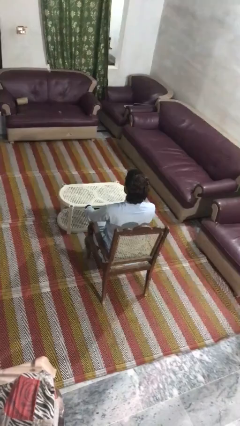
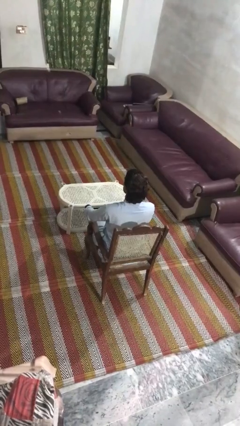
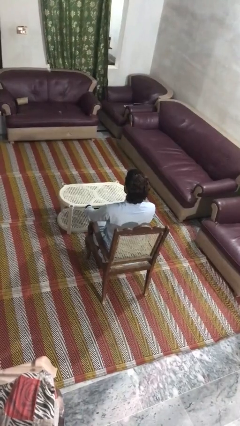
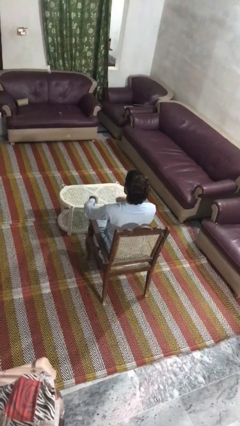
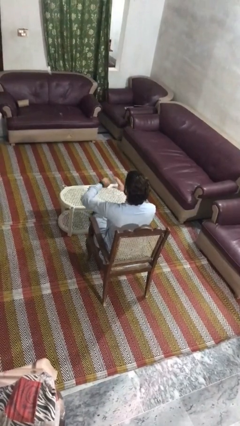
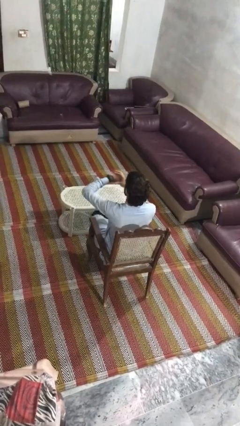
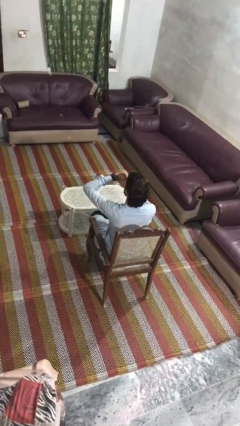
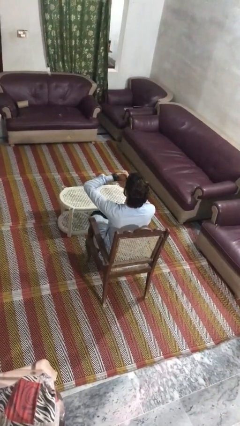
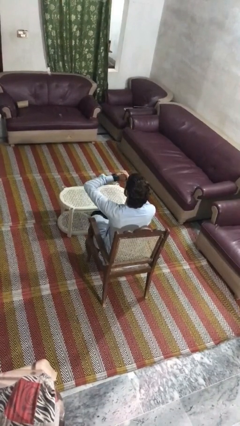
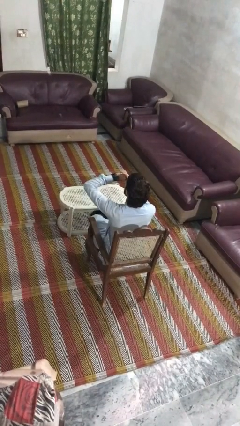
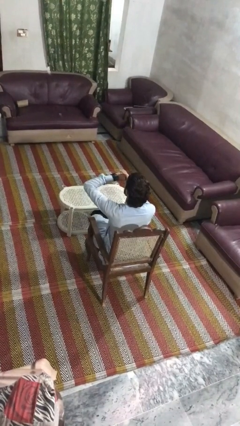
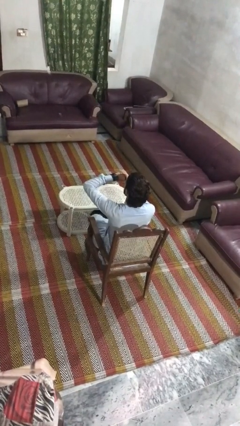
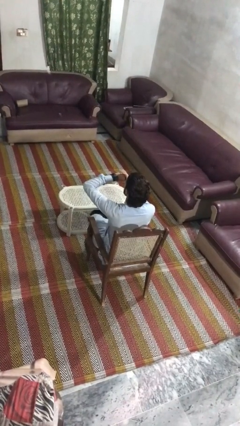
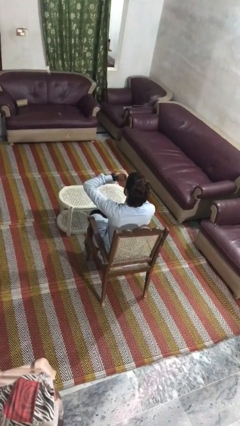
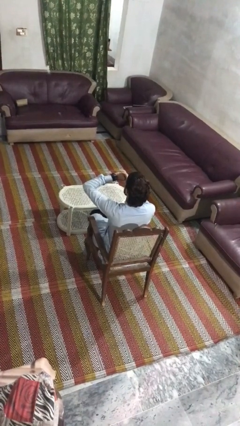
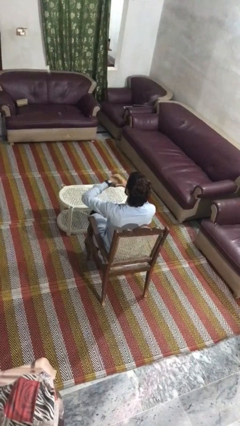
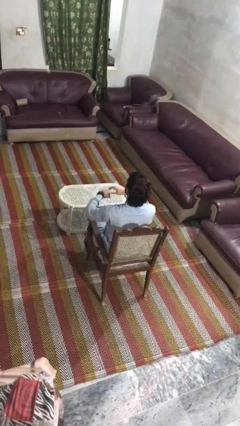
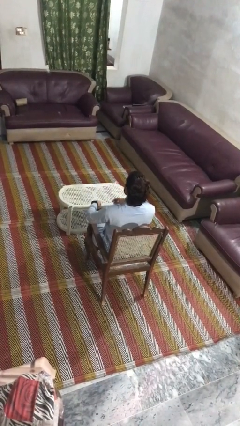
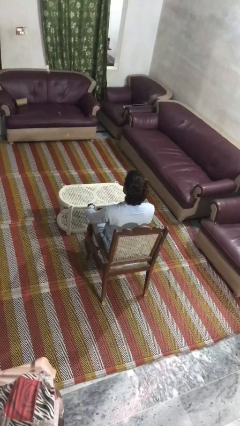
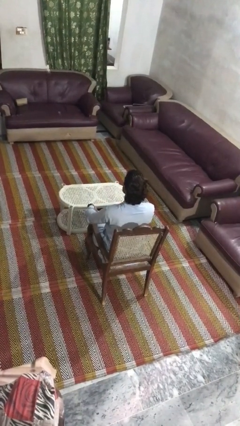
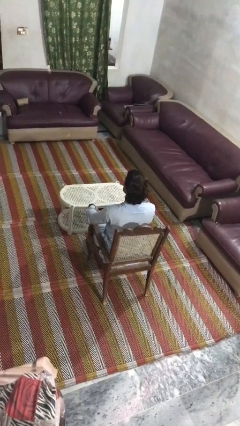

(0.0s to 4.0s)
person looks at wristwatch

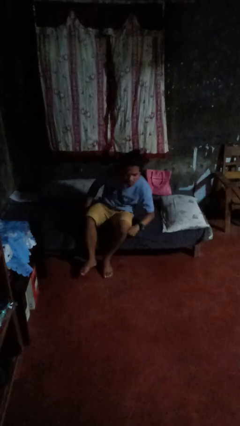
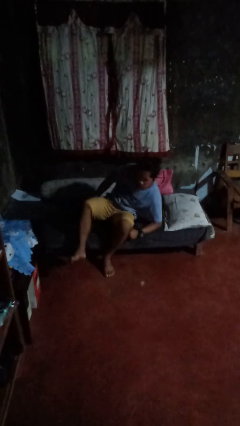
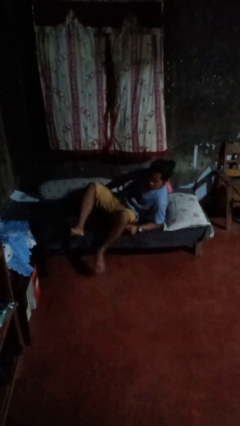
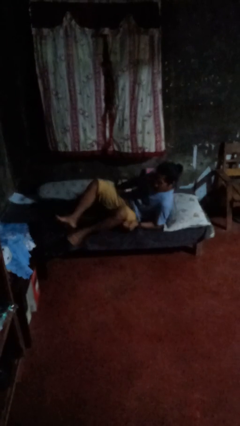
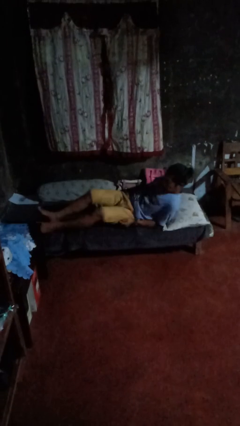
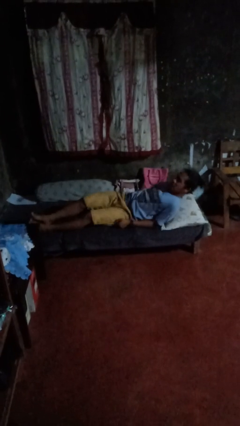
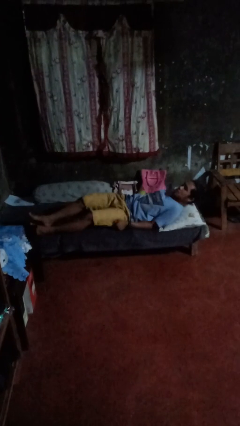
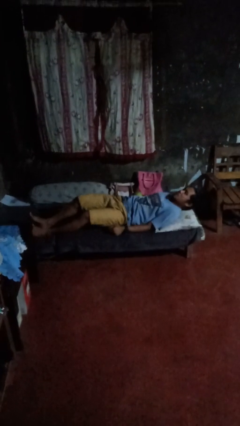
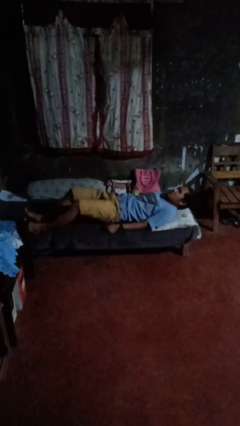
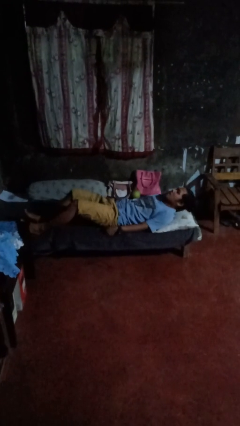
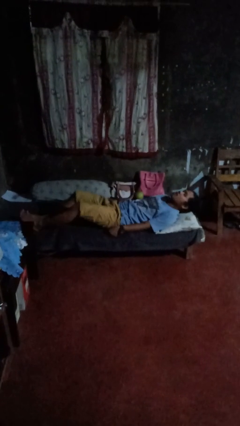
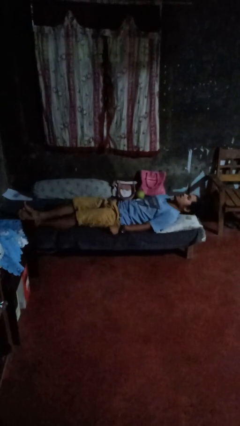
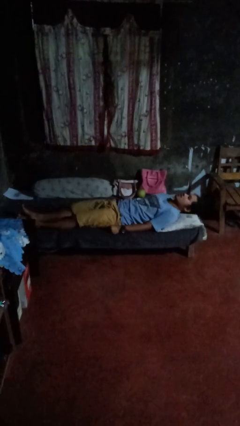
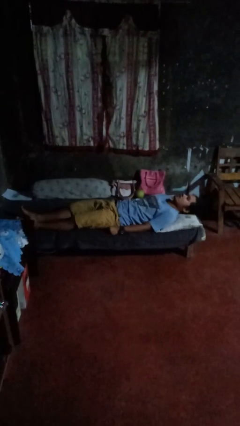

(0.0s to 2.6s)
person lies down on bed

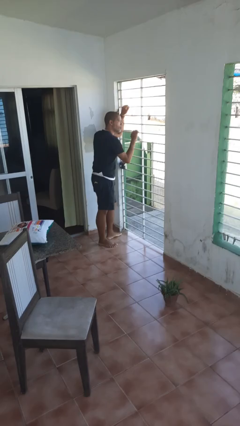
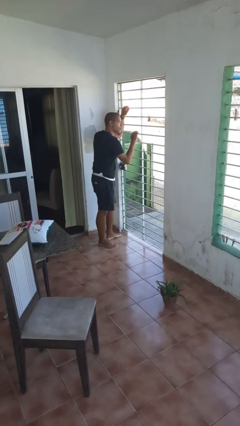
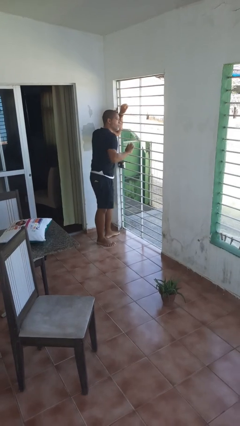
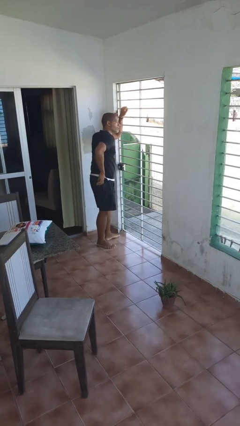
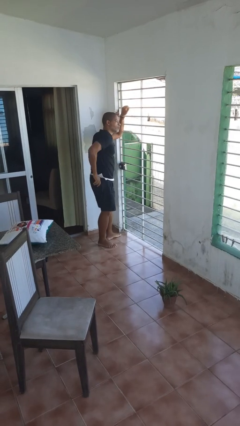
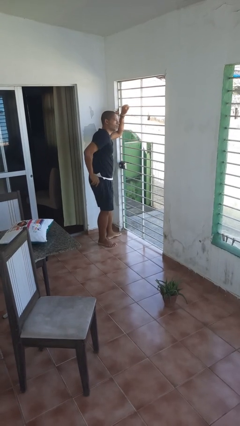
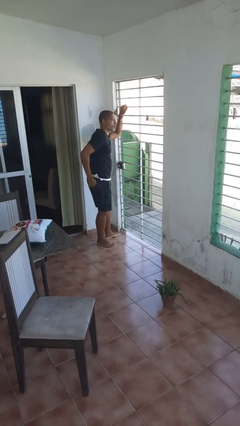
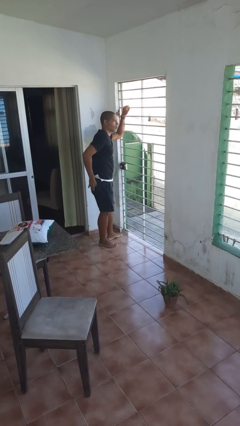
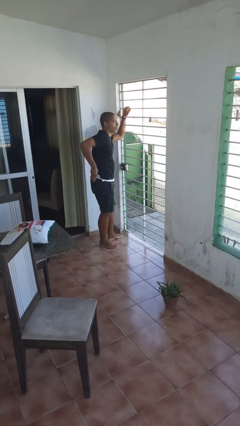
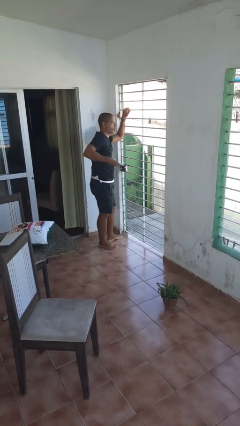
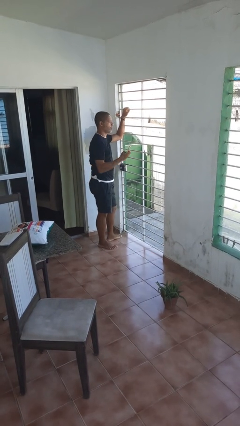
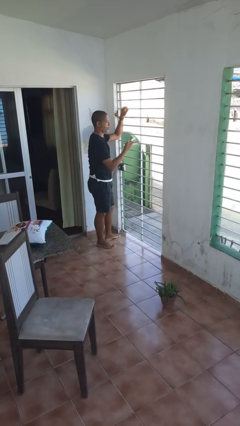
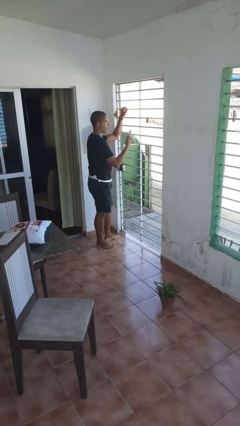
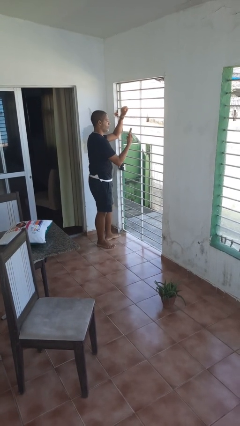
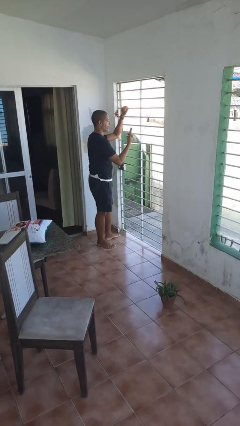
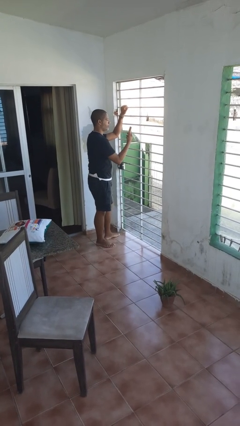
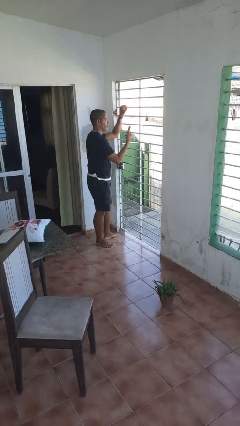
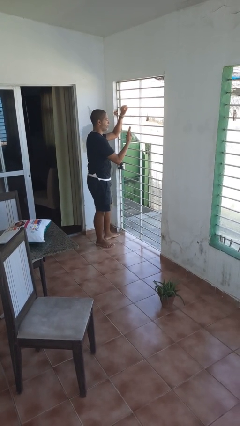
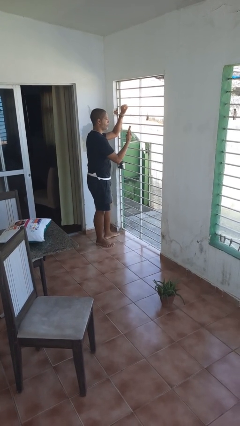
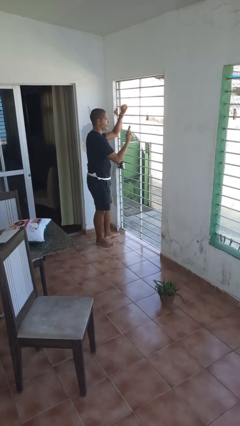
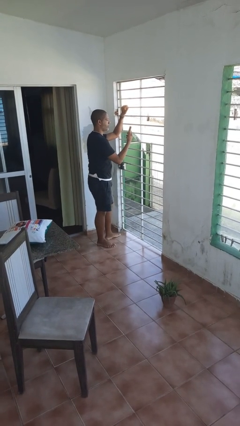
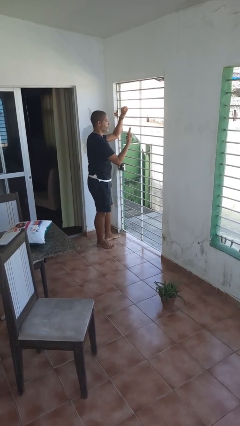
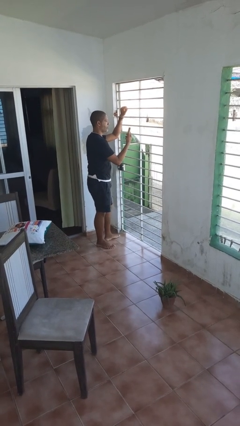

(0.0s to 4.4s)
person takes phone from pocket

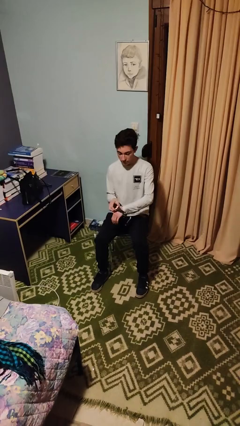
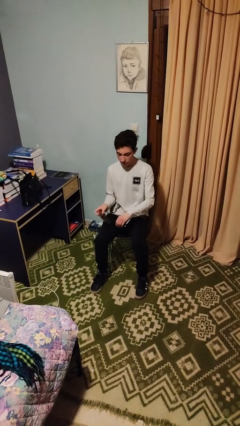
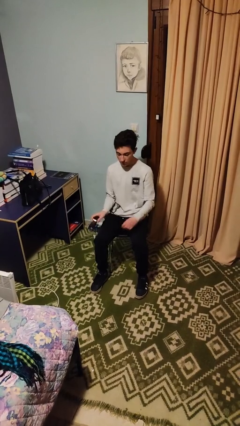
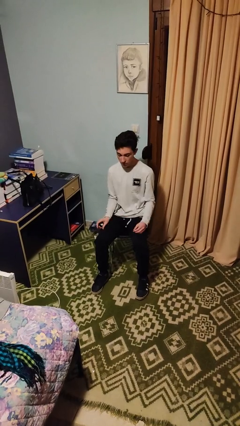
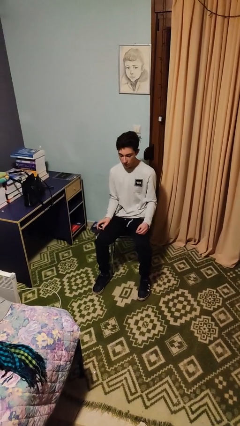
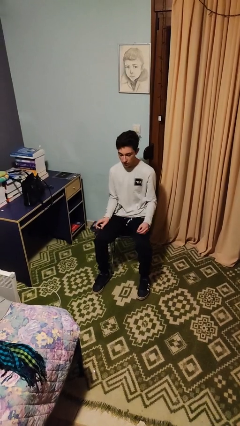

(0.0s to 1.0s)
person takes off wristwatch

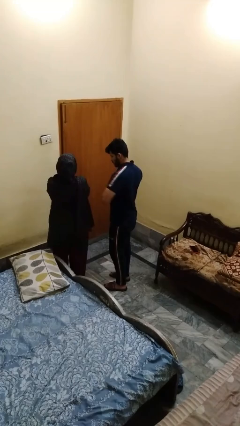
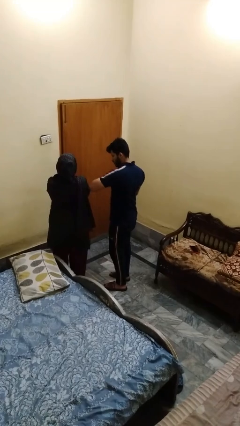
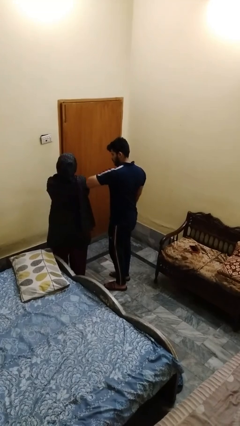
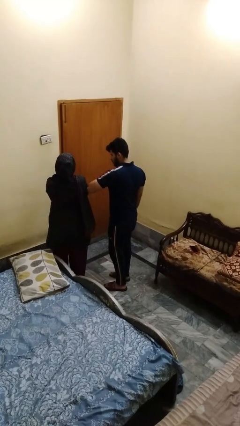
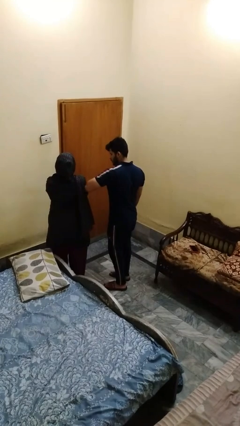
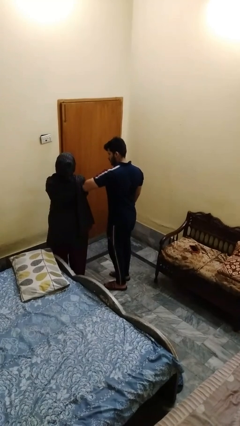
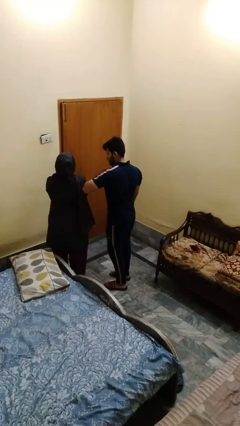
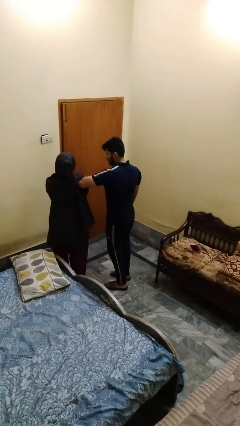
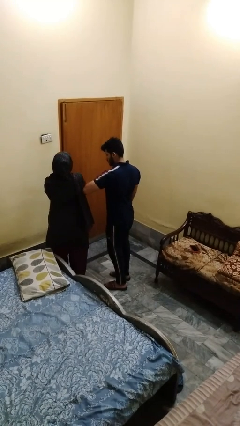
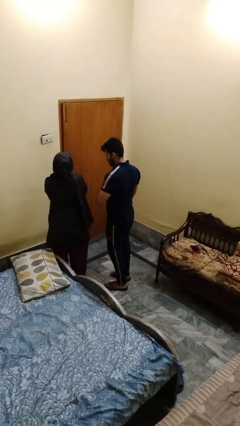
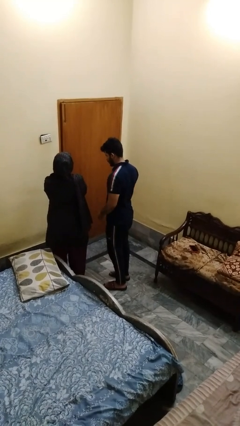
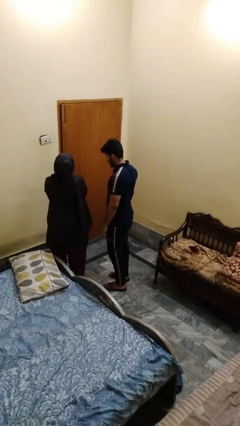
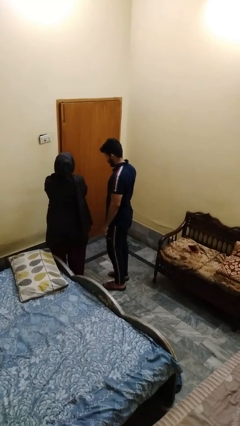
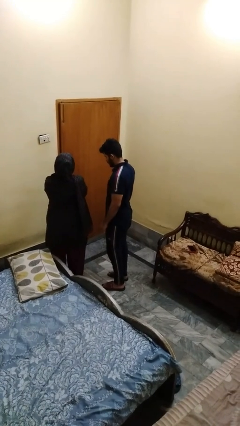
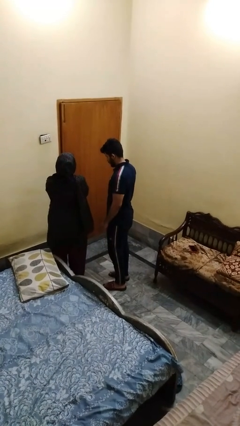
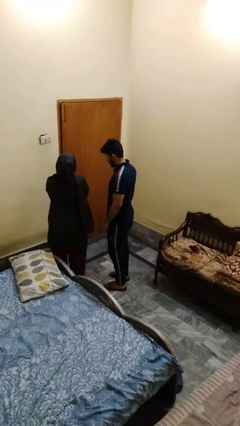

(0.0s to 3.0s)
person nudges person with elbow

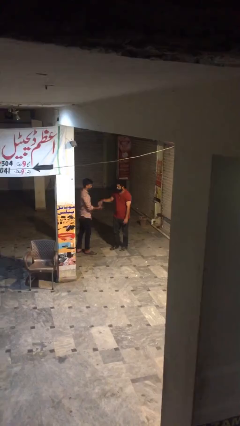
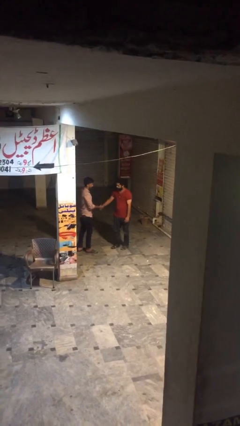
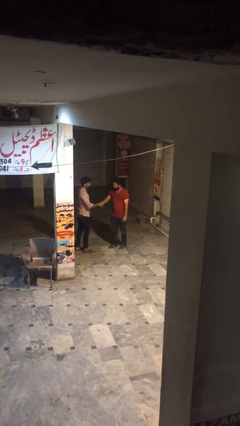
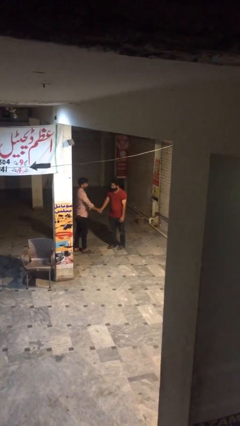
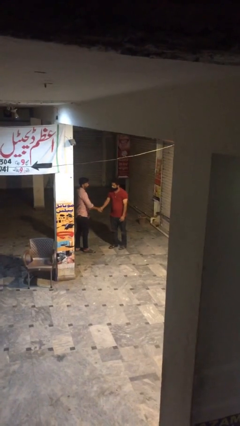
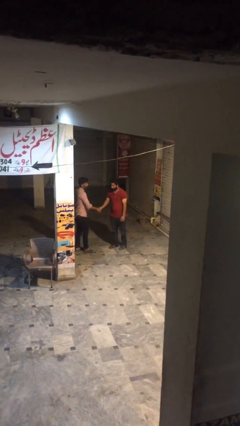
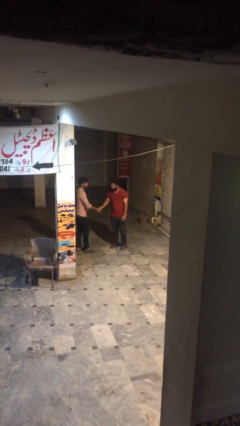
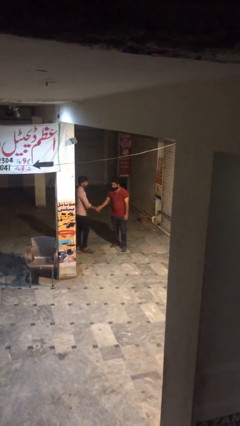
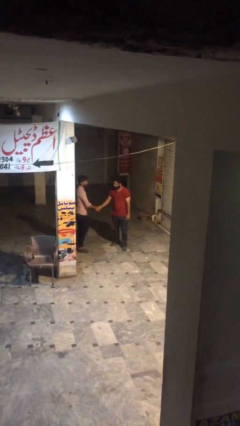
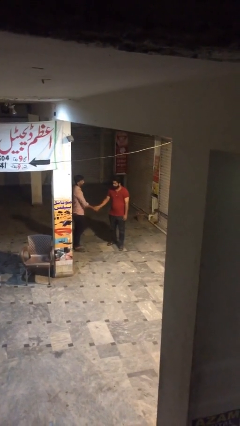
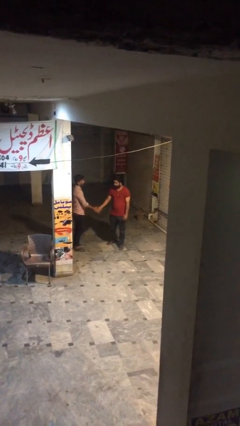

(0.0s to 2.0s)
person shakes hand

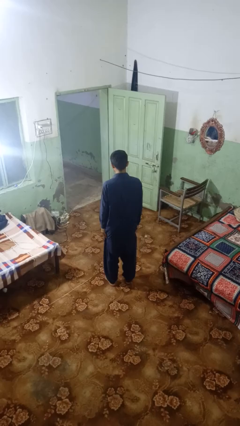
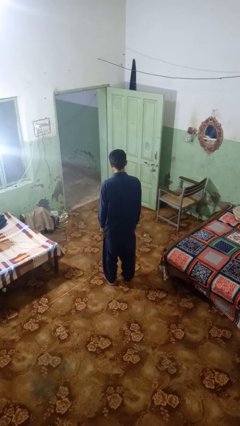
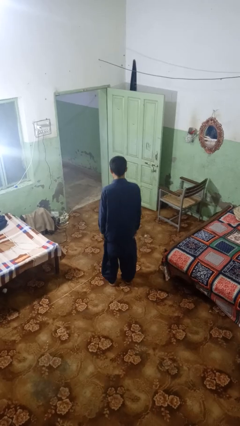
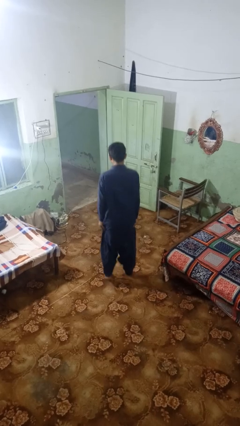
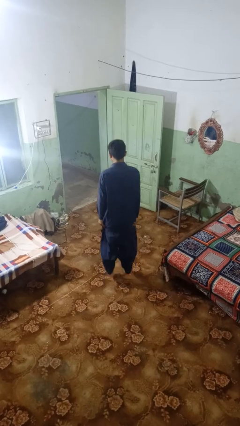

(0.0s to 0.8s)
person jumps
